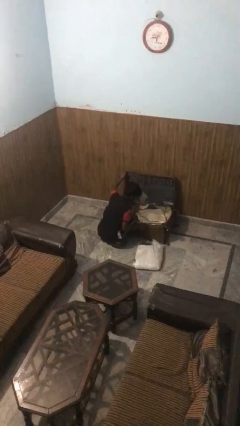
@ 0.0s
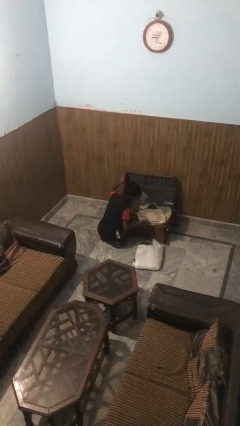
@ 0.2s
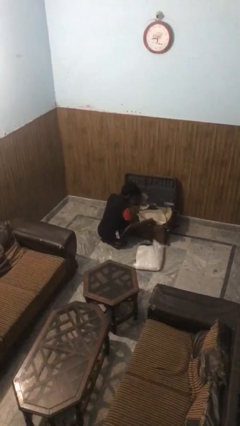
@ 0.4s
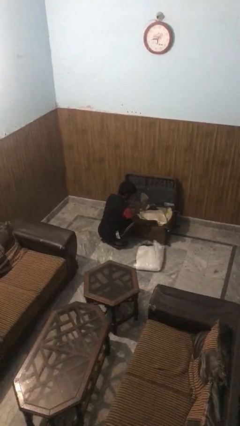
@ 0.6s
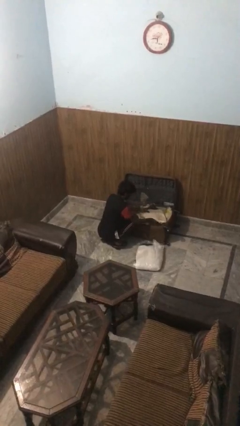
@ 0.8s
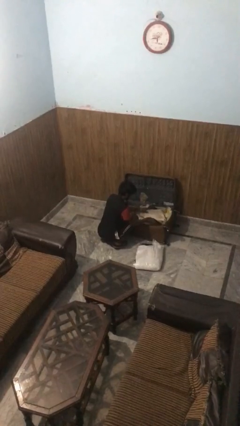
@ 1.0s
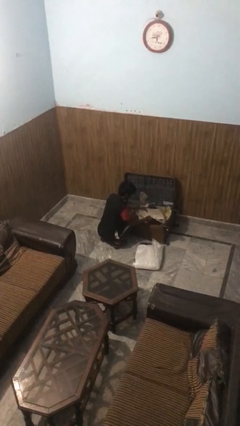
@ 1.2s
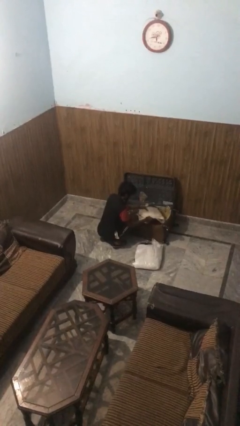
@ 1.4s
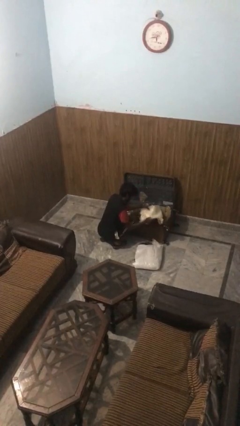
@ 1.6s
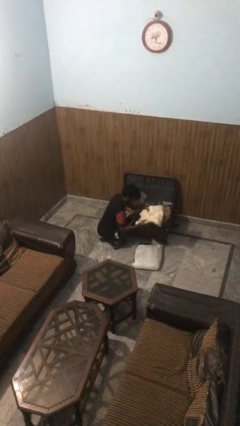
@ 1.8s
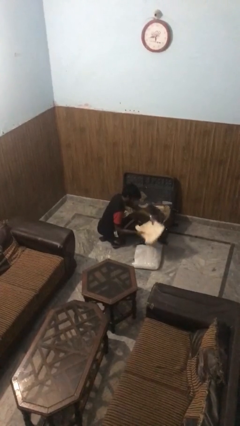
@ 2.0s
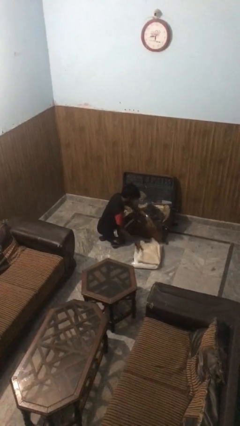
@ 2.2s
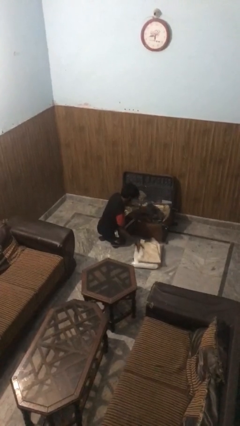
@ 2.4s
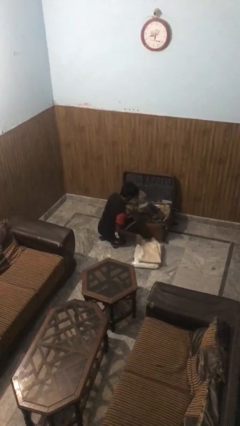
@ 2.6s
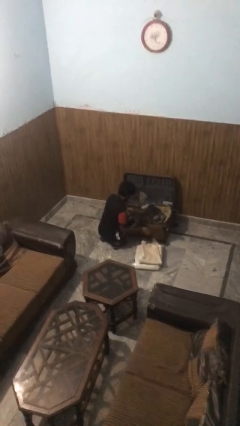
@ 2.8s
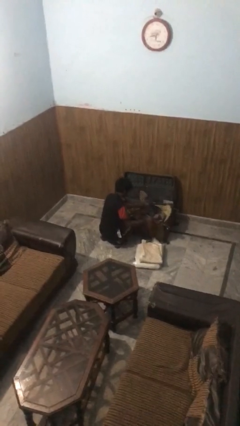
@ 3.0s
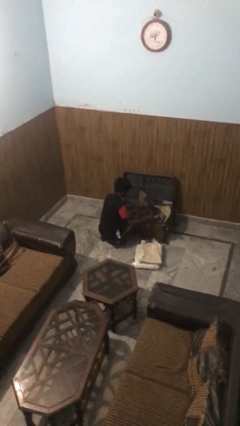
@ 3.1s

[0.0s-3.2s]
person unloads clothes from suitcase

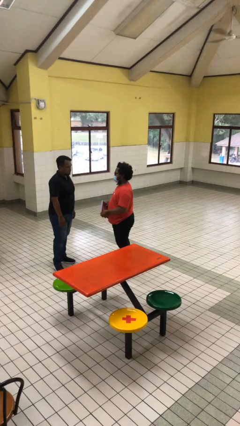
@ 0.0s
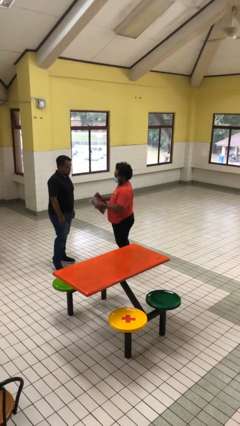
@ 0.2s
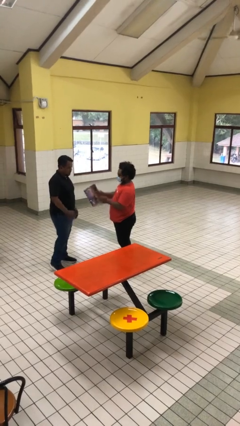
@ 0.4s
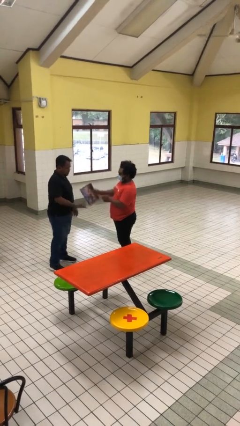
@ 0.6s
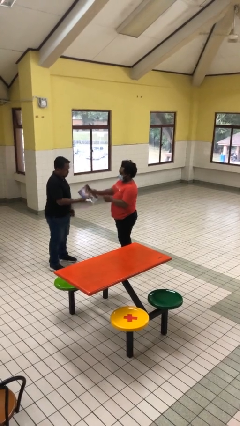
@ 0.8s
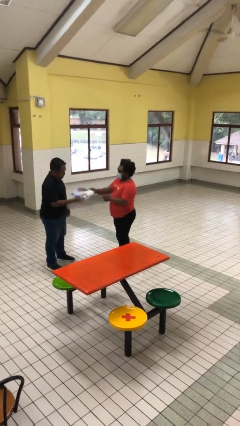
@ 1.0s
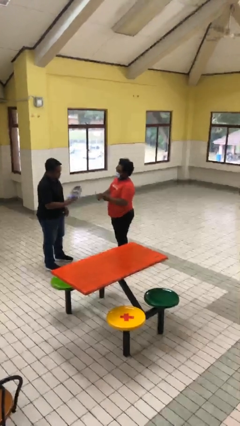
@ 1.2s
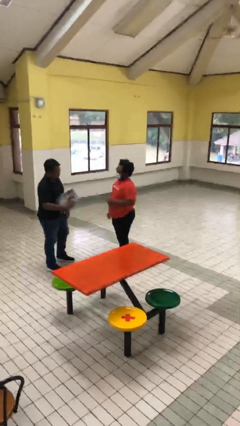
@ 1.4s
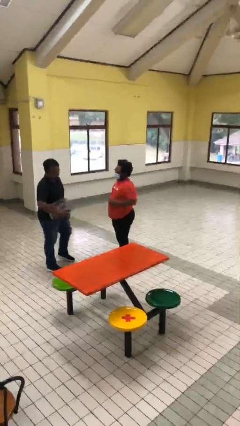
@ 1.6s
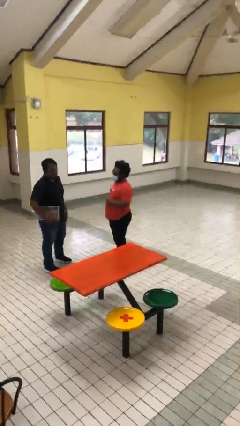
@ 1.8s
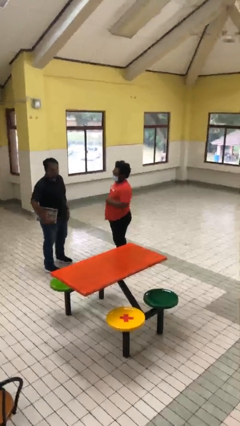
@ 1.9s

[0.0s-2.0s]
person transfers object to person

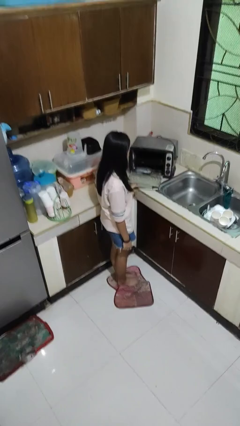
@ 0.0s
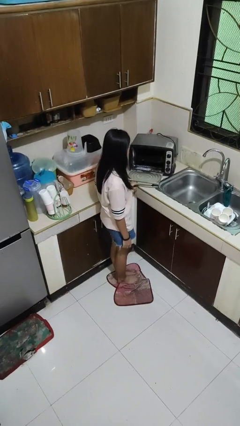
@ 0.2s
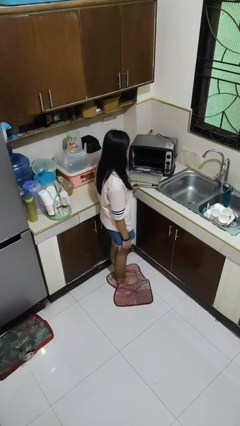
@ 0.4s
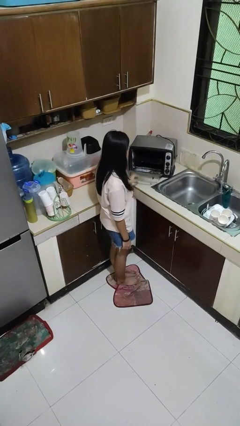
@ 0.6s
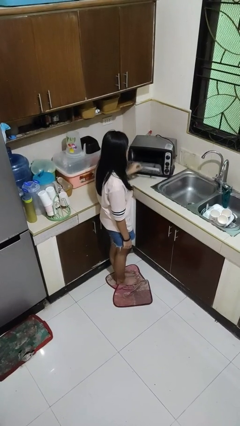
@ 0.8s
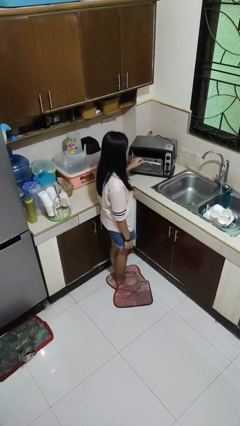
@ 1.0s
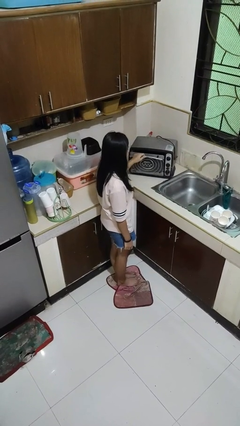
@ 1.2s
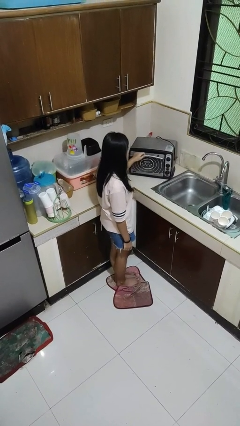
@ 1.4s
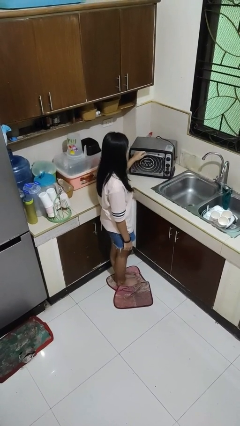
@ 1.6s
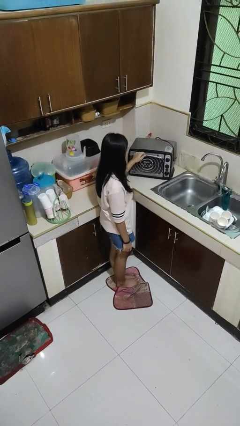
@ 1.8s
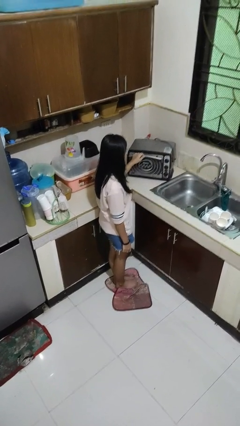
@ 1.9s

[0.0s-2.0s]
person closes microwave

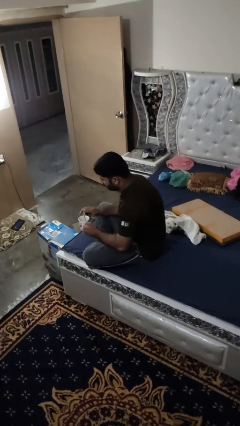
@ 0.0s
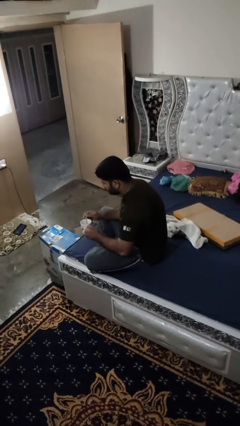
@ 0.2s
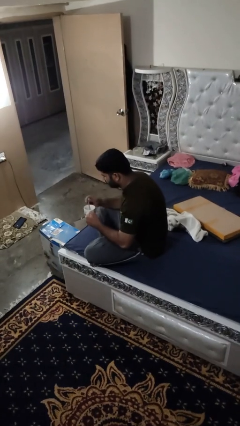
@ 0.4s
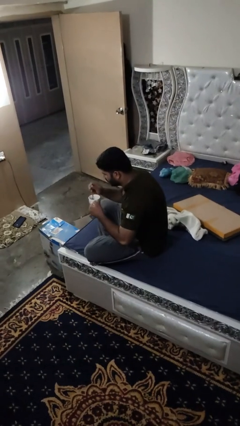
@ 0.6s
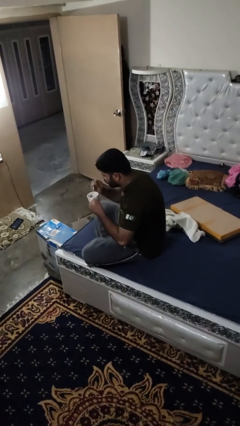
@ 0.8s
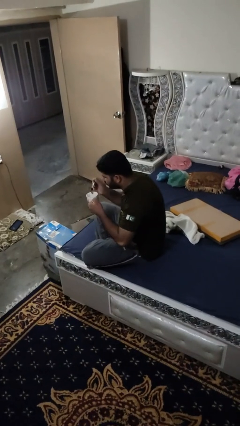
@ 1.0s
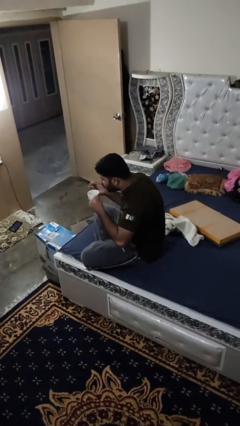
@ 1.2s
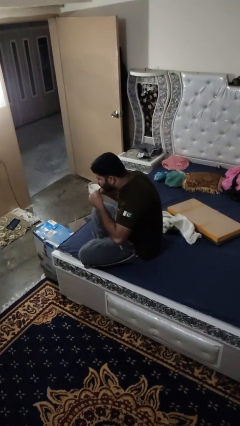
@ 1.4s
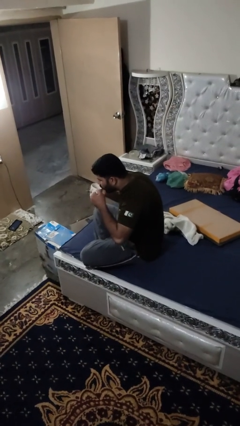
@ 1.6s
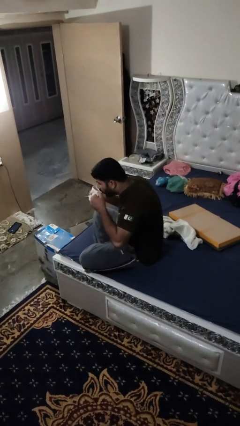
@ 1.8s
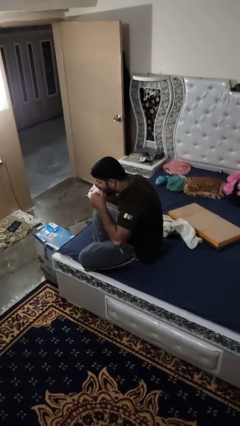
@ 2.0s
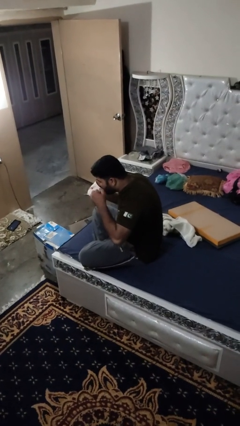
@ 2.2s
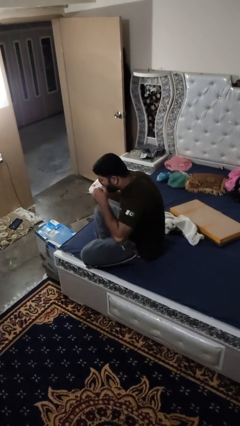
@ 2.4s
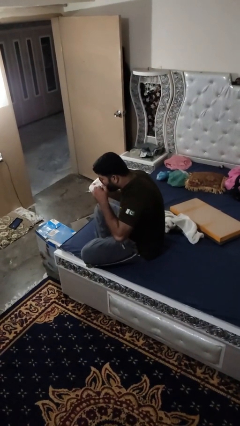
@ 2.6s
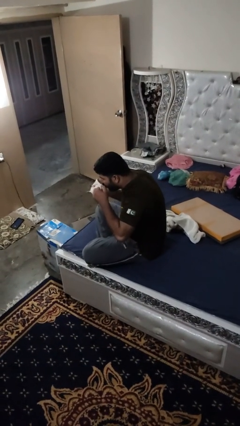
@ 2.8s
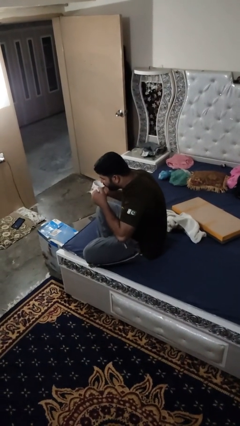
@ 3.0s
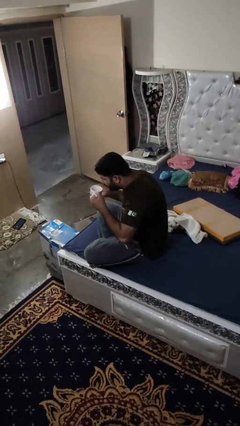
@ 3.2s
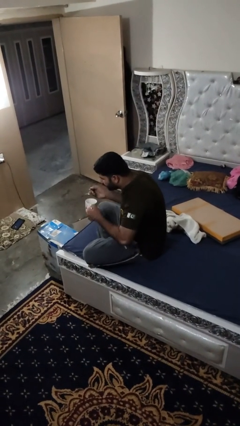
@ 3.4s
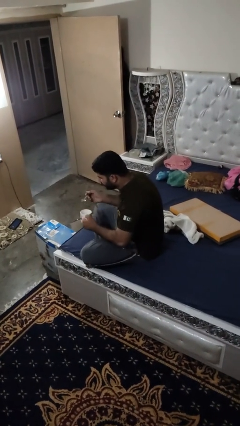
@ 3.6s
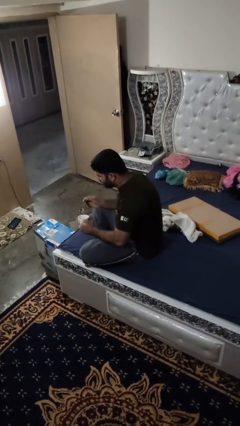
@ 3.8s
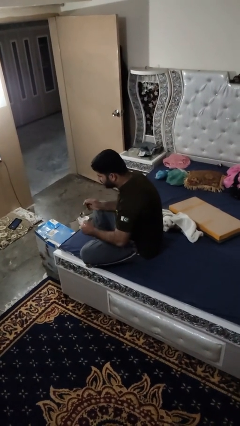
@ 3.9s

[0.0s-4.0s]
person drinks from mug

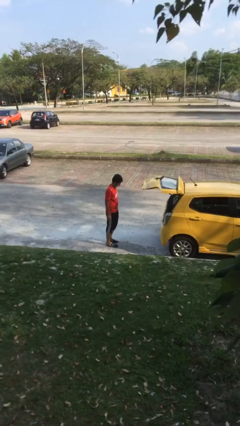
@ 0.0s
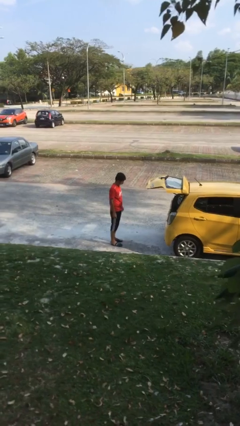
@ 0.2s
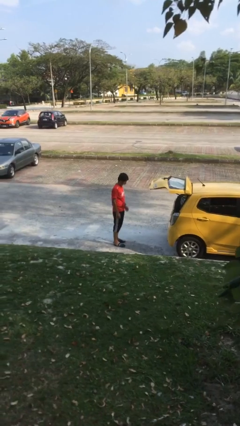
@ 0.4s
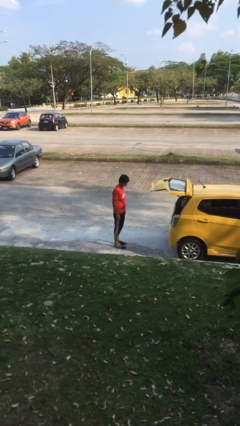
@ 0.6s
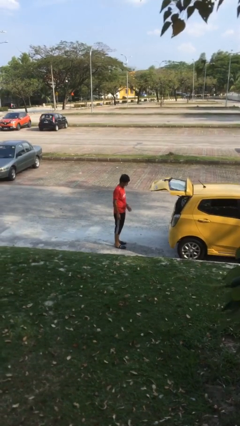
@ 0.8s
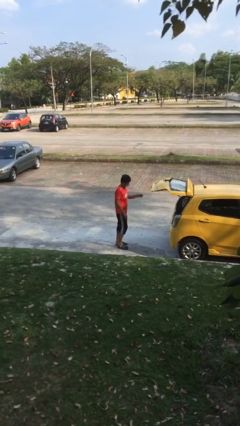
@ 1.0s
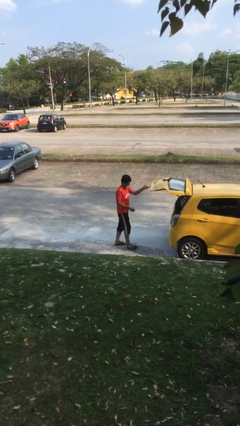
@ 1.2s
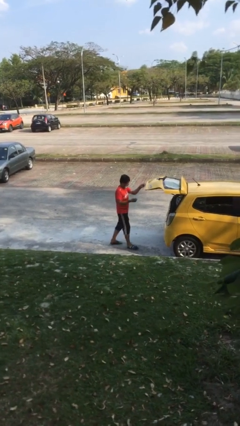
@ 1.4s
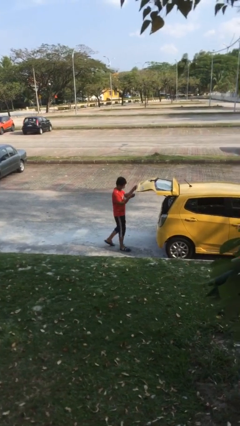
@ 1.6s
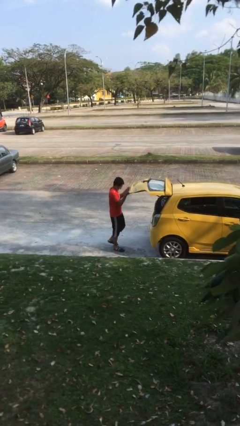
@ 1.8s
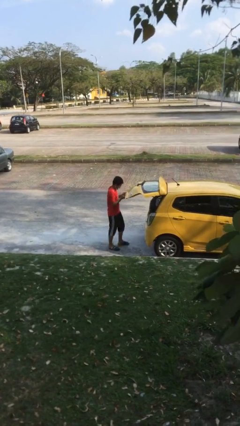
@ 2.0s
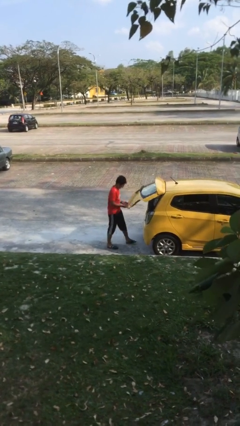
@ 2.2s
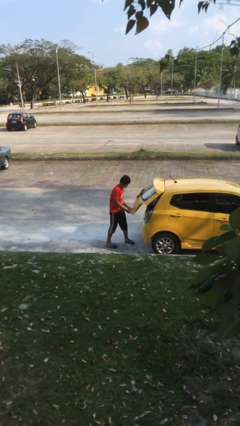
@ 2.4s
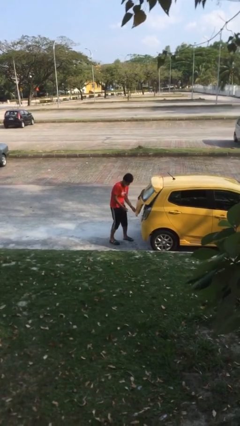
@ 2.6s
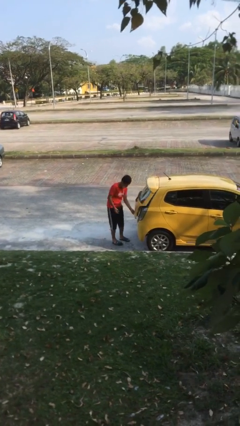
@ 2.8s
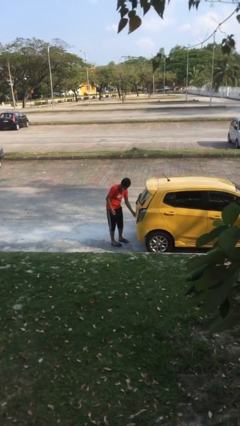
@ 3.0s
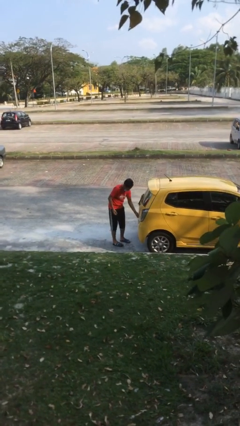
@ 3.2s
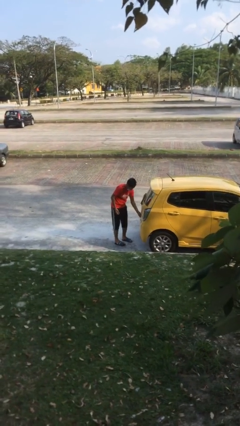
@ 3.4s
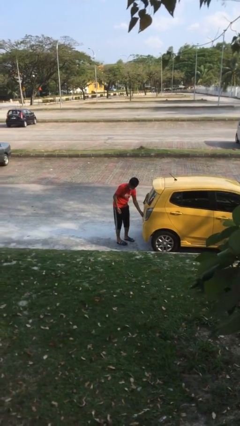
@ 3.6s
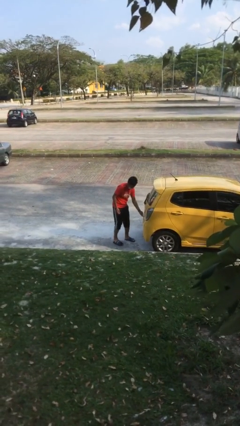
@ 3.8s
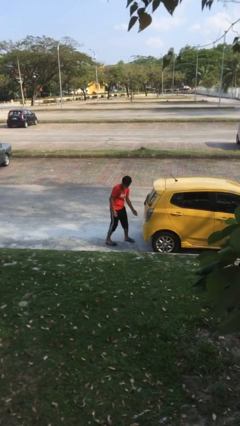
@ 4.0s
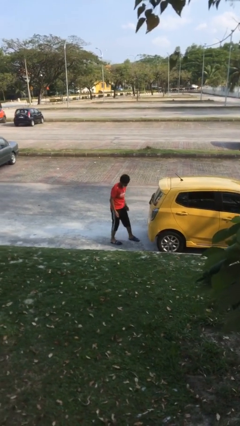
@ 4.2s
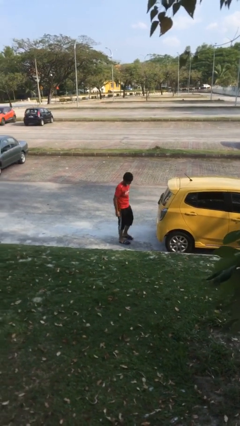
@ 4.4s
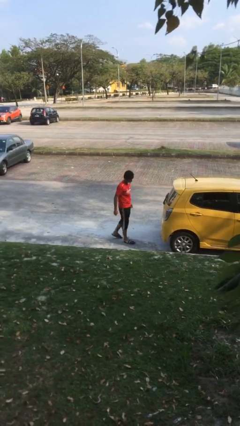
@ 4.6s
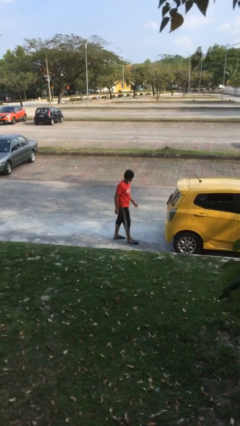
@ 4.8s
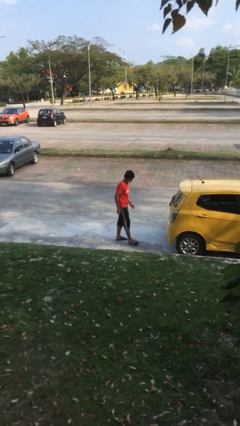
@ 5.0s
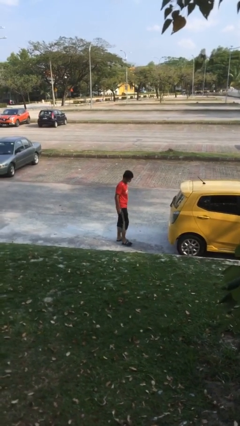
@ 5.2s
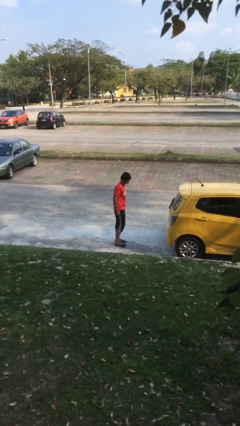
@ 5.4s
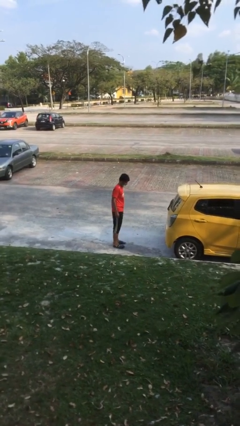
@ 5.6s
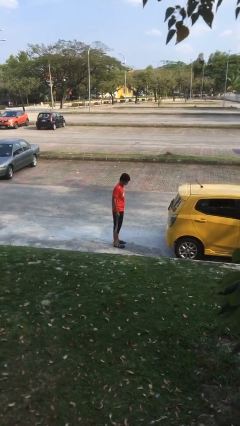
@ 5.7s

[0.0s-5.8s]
person closes car trunk

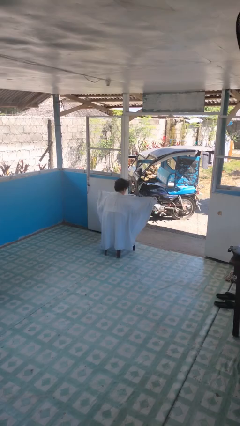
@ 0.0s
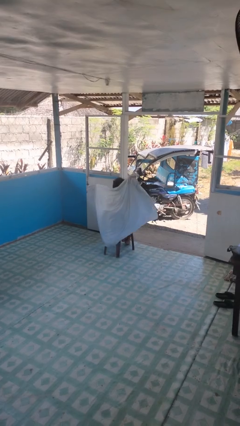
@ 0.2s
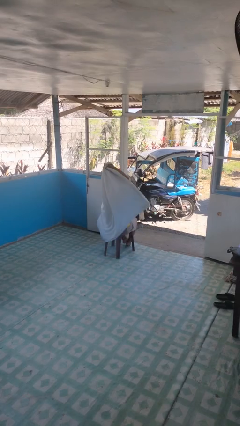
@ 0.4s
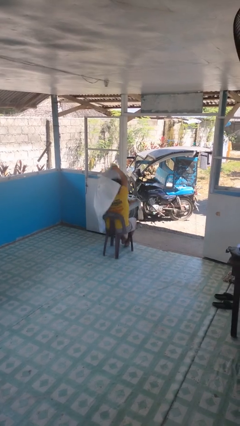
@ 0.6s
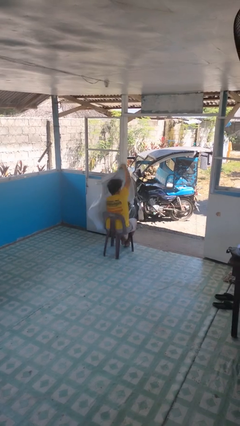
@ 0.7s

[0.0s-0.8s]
person uncovers with blanket
